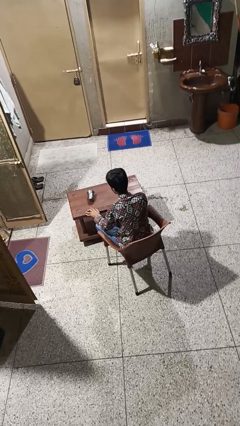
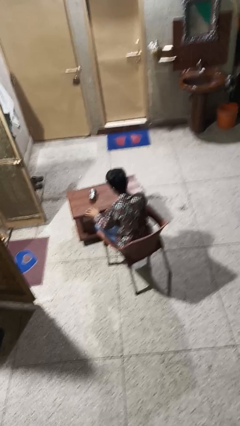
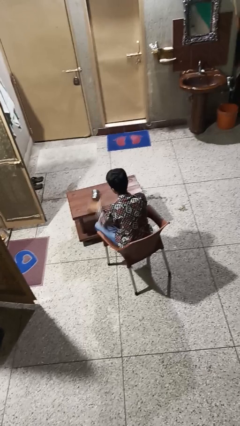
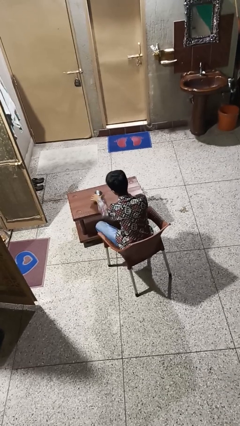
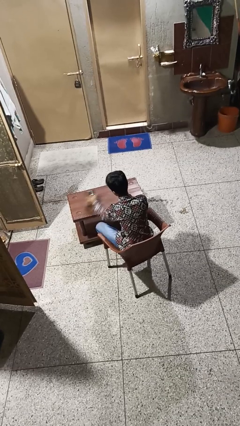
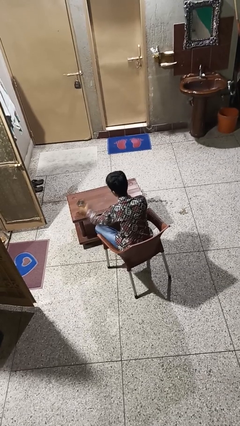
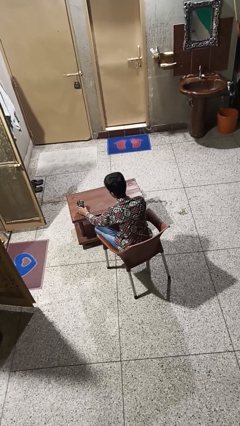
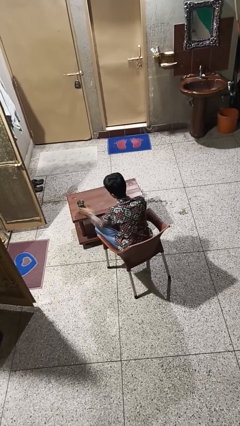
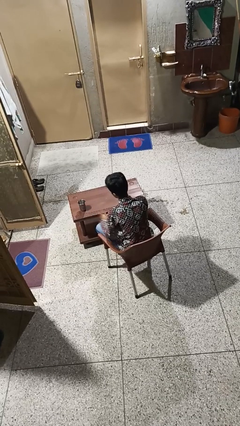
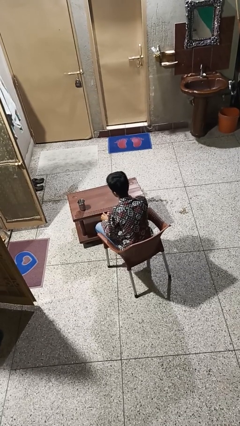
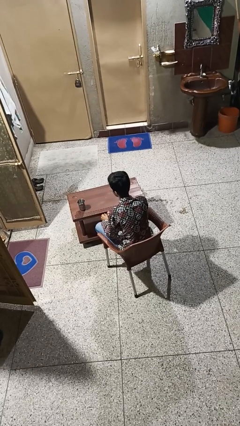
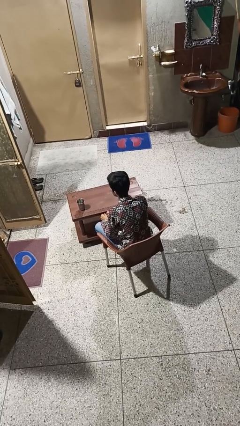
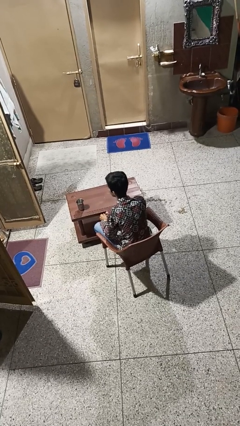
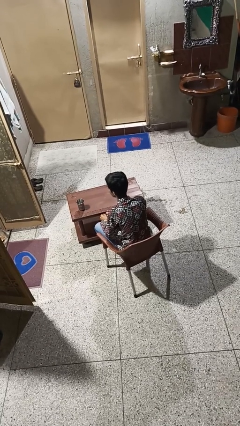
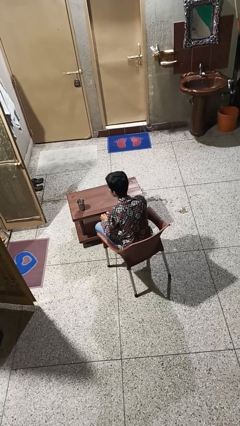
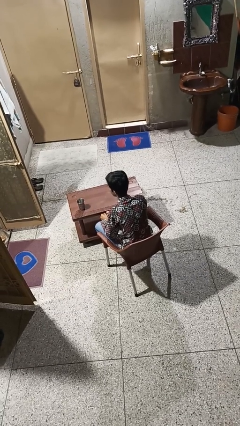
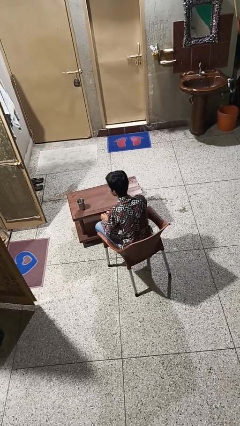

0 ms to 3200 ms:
person sets upright glass

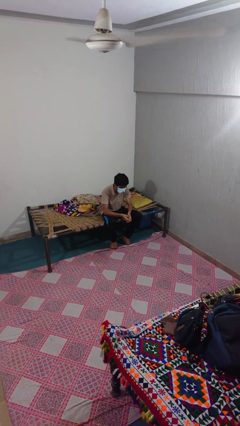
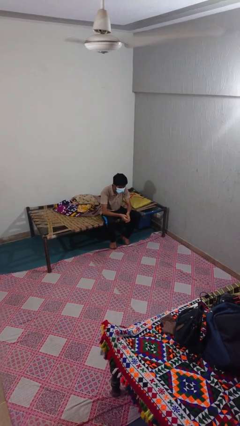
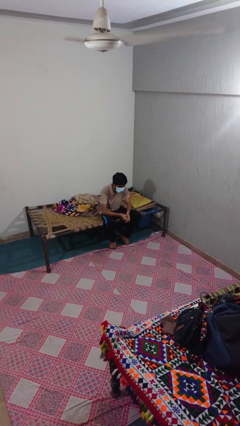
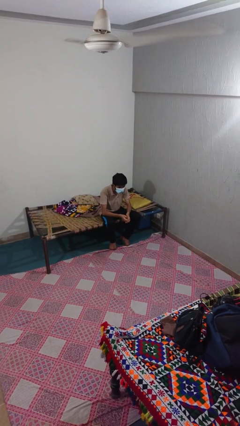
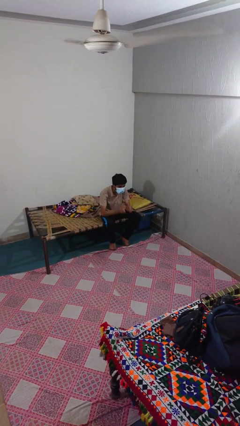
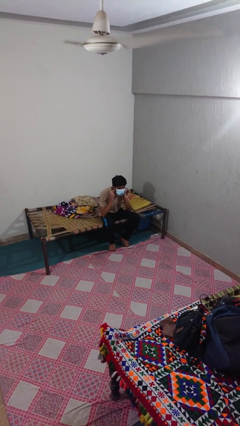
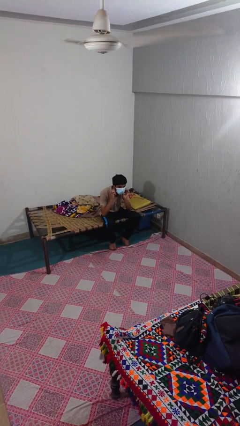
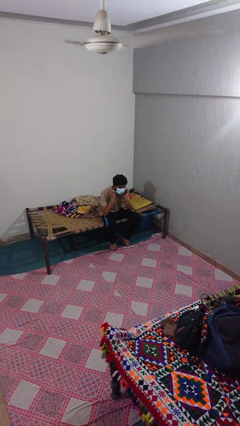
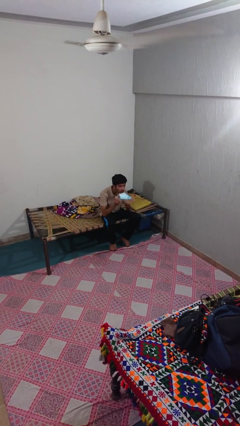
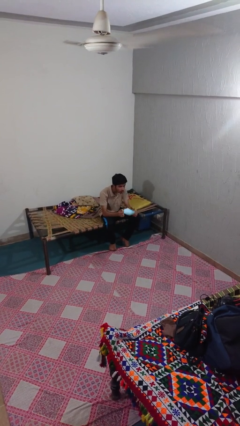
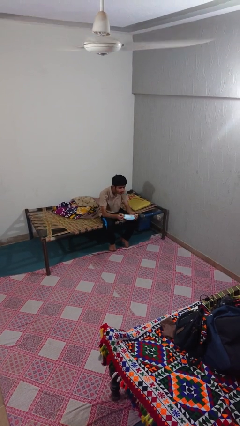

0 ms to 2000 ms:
person takes off facemask

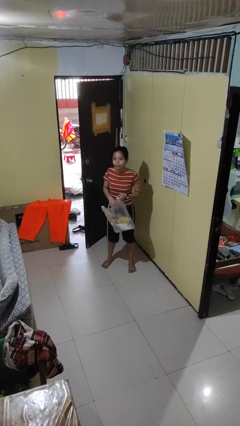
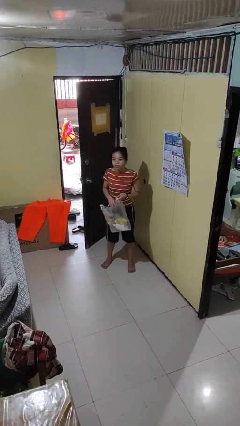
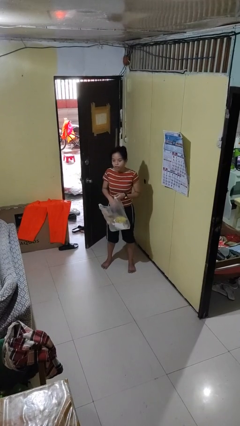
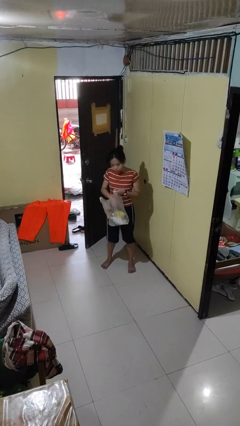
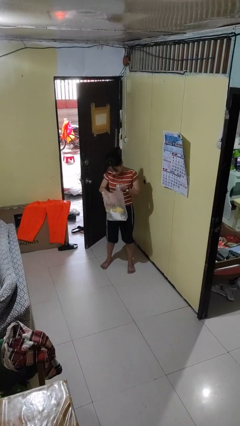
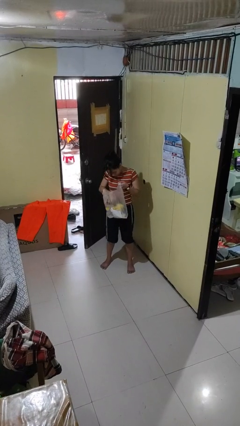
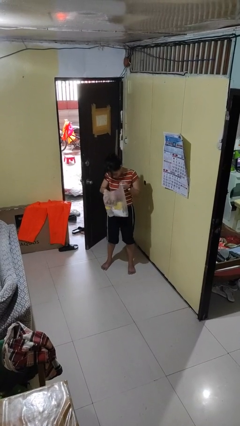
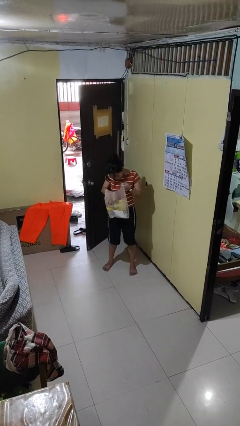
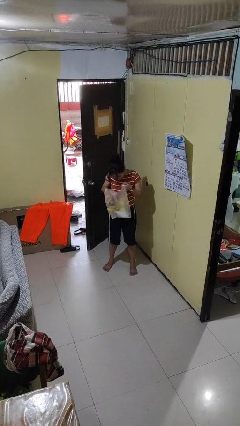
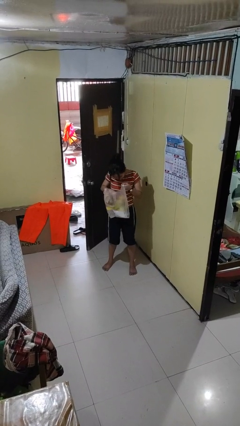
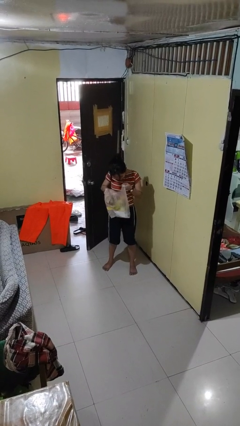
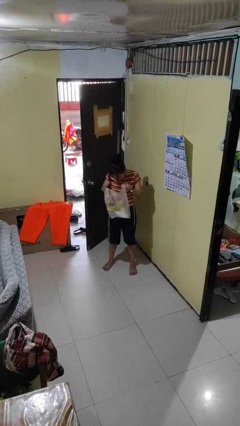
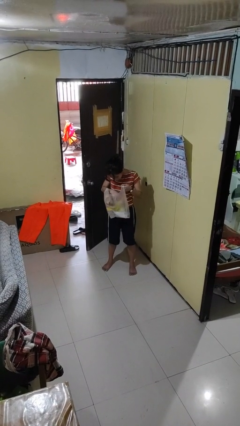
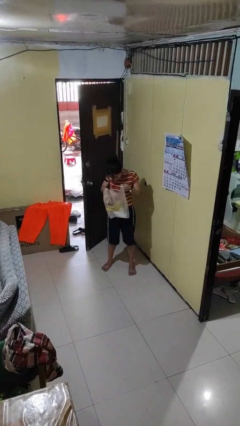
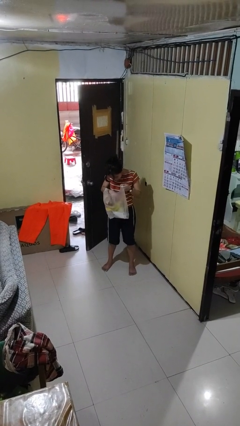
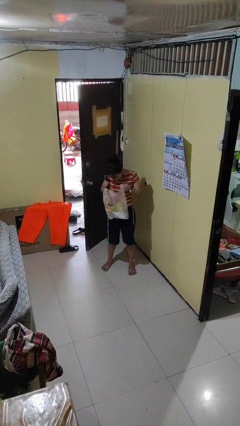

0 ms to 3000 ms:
person searches in bag

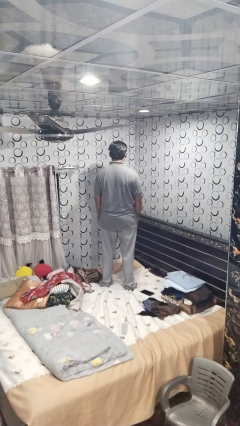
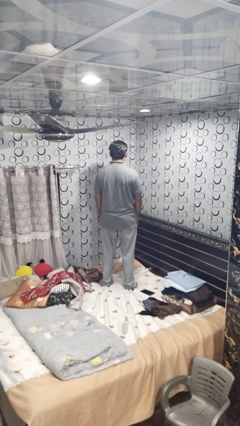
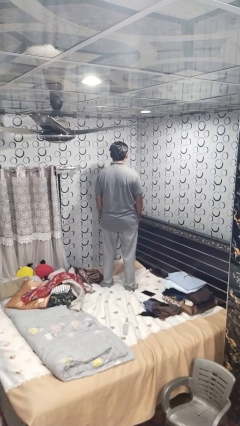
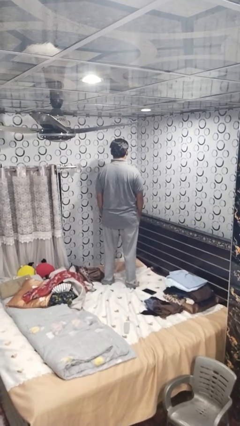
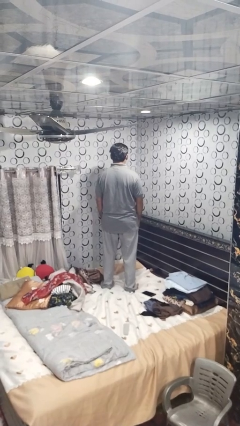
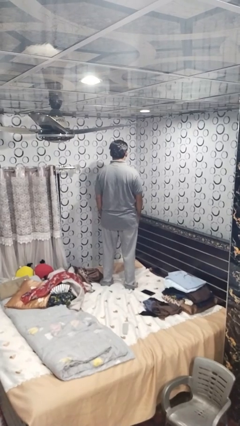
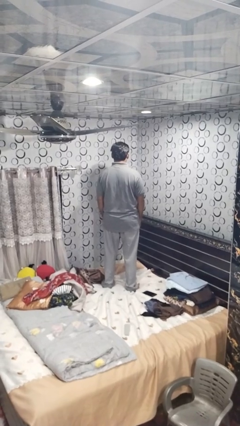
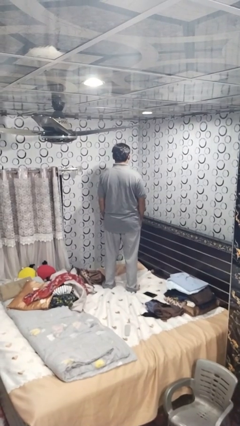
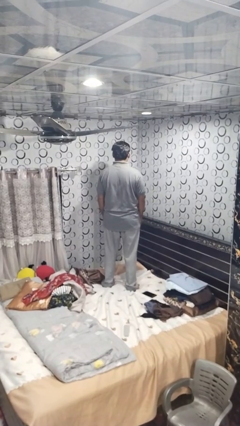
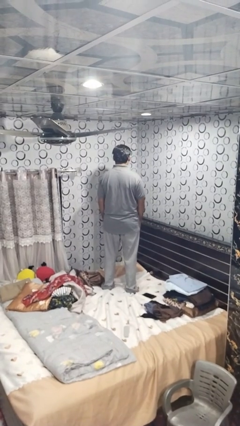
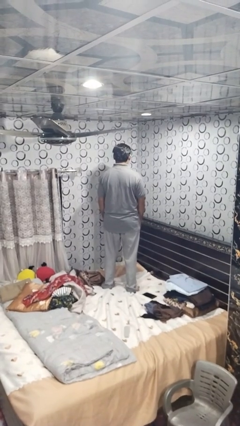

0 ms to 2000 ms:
person jumps on bed

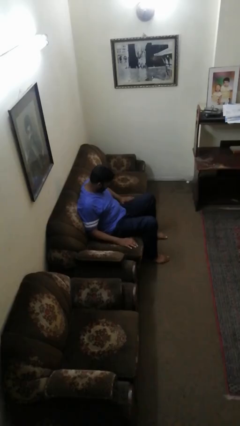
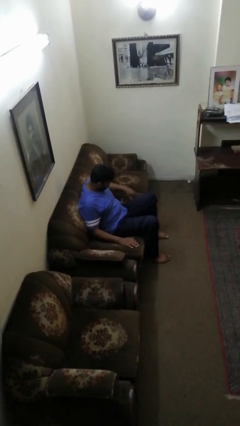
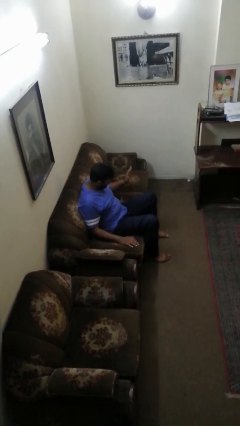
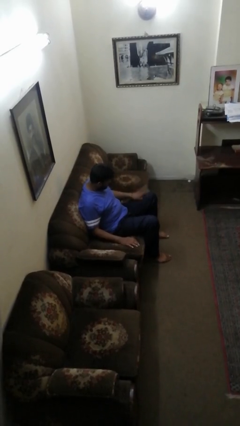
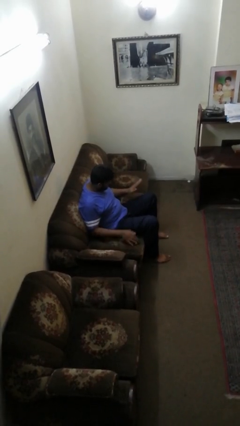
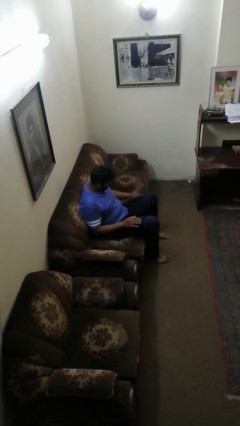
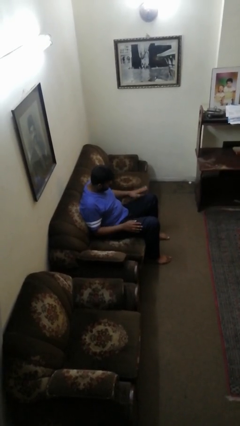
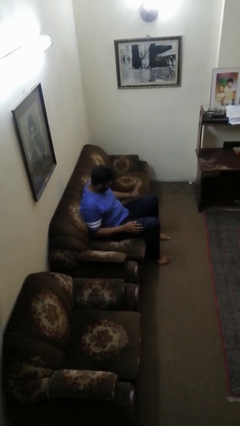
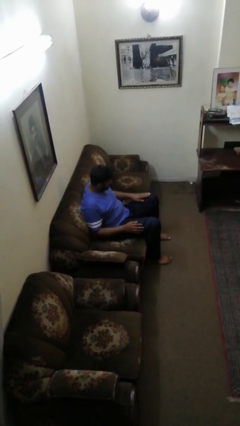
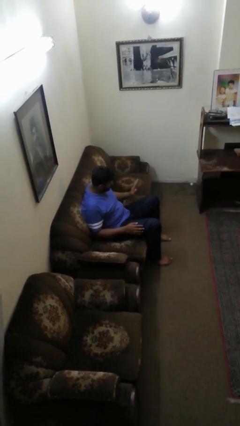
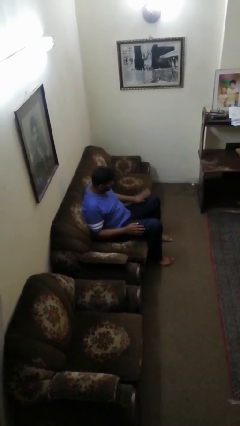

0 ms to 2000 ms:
person slaps hands on thighs

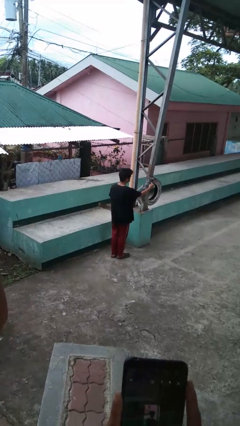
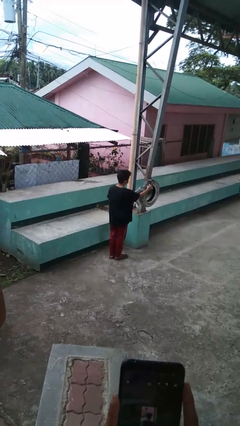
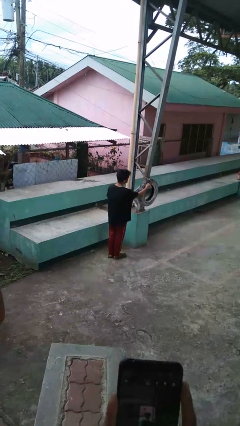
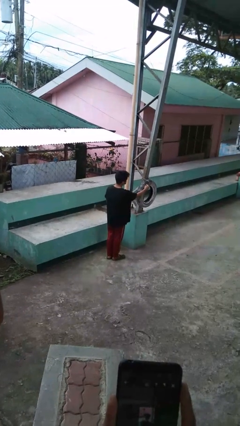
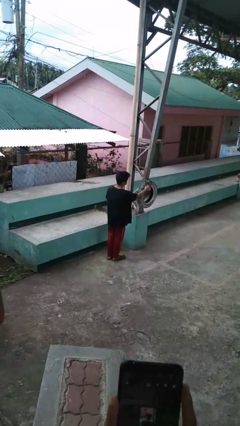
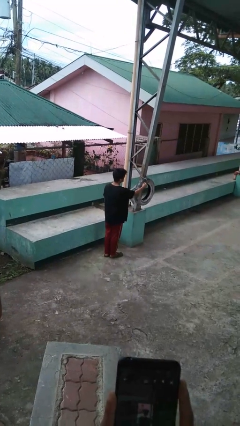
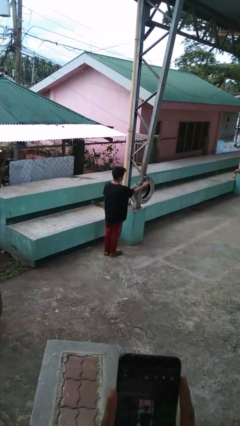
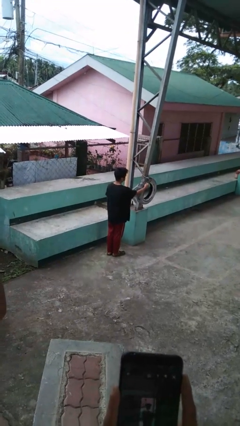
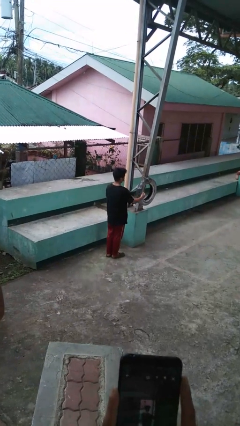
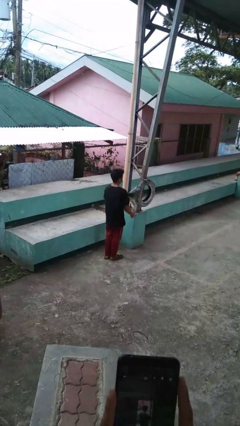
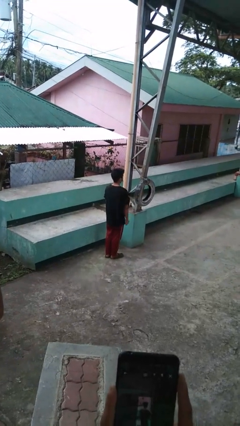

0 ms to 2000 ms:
person taps object with finger

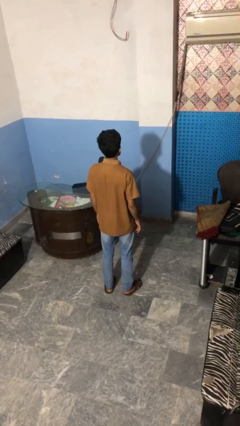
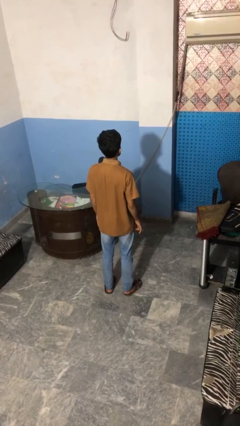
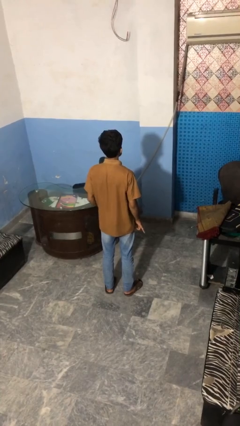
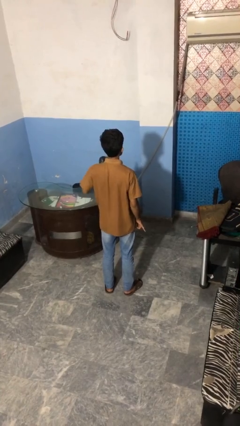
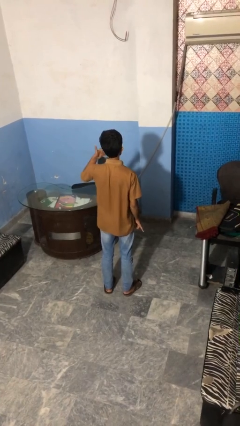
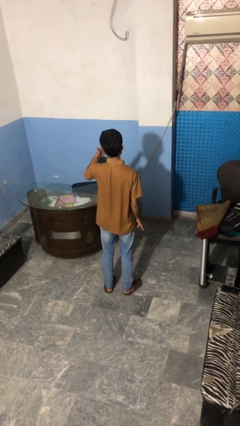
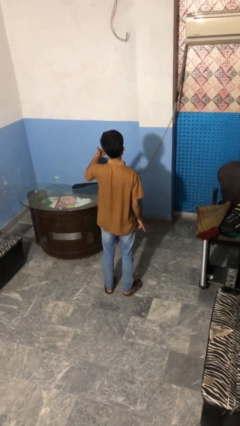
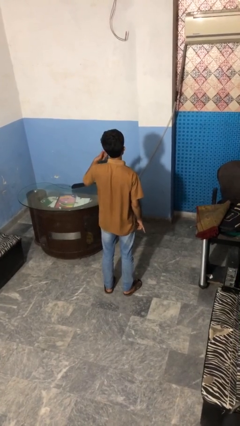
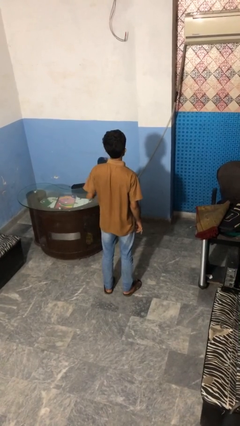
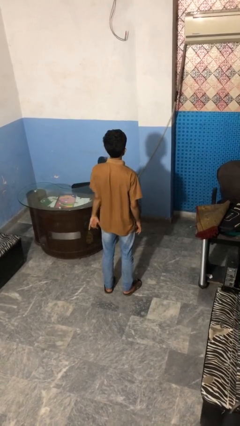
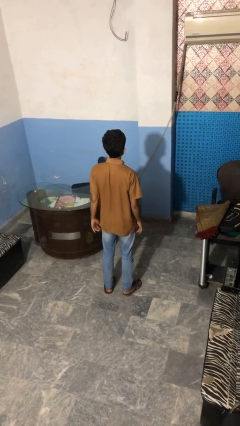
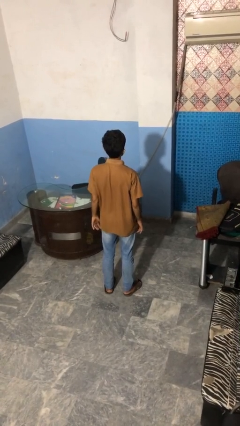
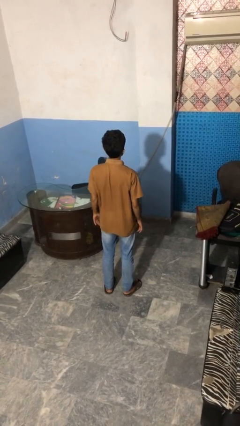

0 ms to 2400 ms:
person gestures call me

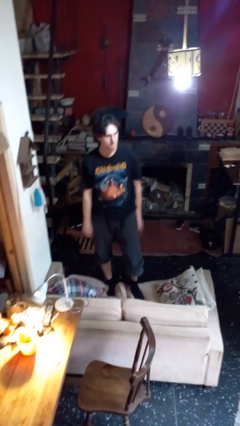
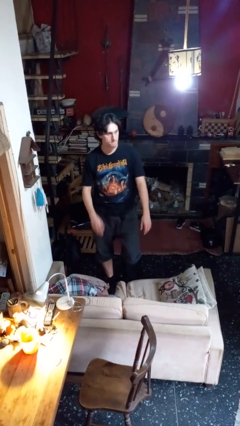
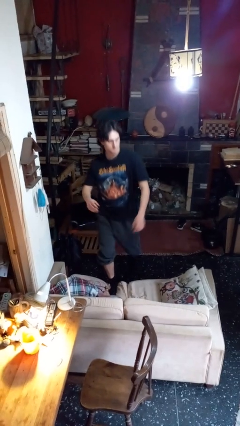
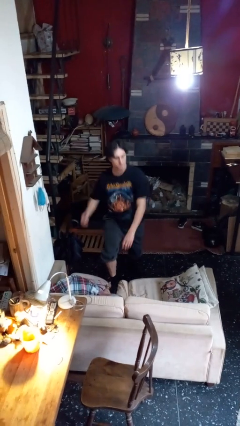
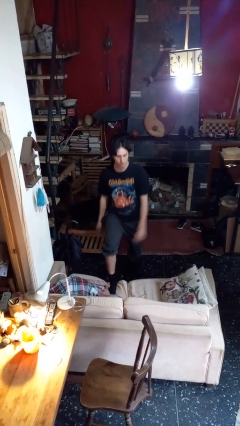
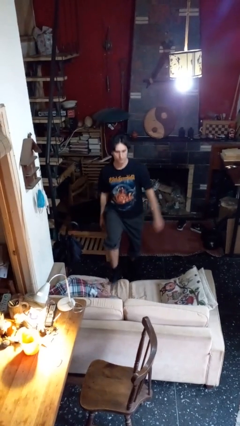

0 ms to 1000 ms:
person climbs off couch
